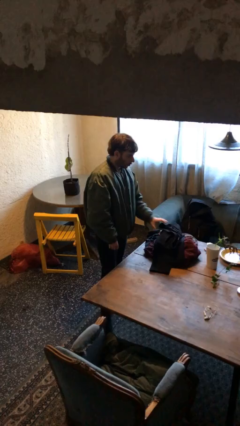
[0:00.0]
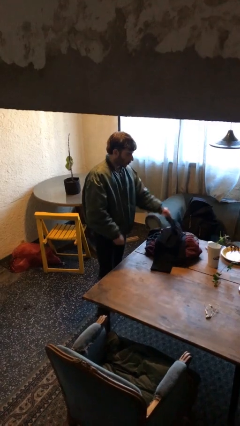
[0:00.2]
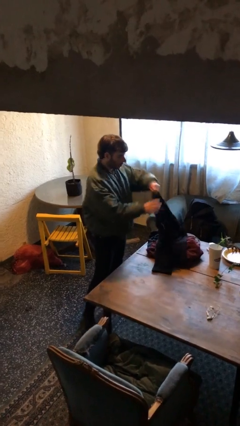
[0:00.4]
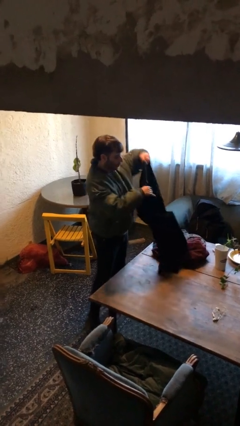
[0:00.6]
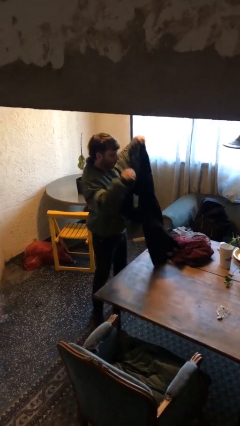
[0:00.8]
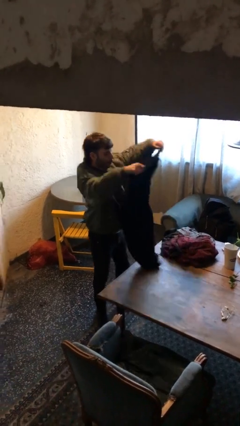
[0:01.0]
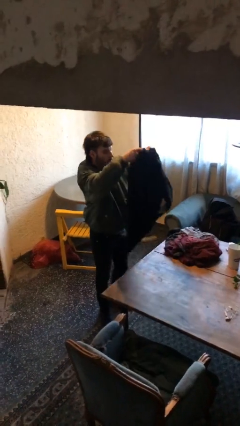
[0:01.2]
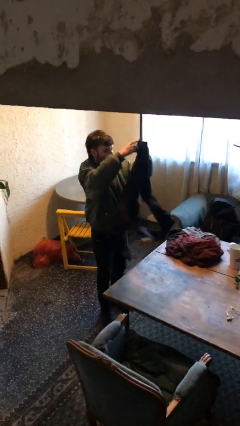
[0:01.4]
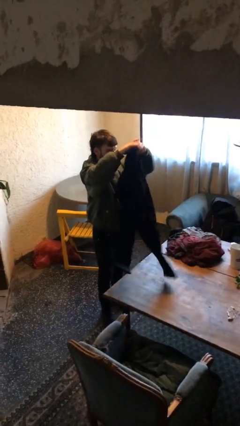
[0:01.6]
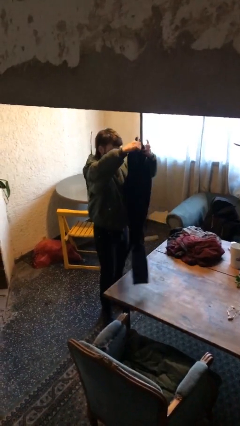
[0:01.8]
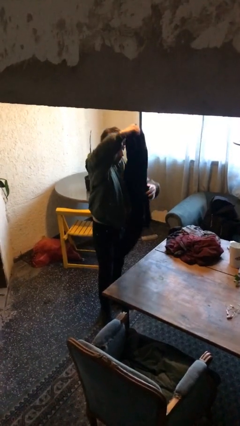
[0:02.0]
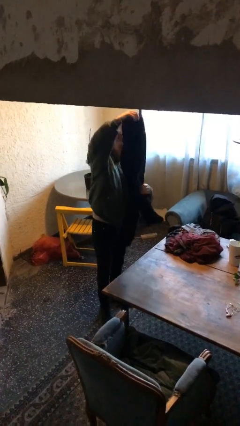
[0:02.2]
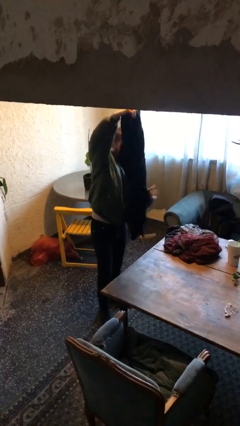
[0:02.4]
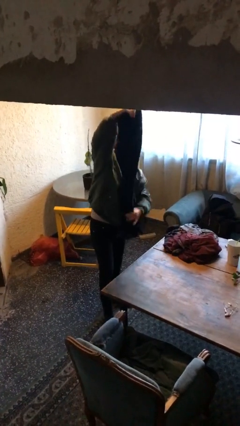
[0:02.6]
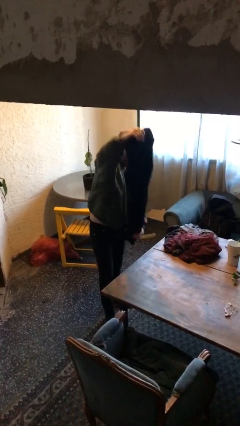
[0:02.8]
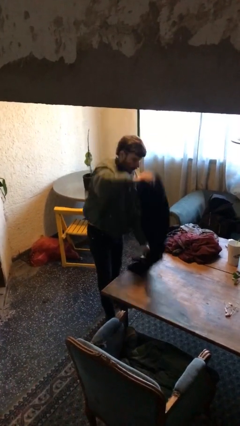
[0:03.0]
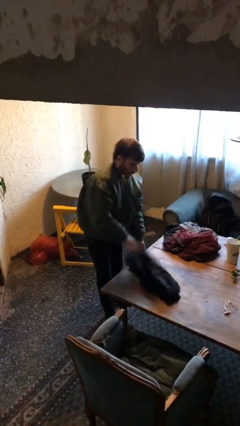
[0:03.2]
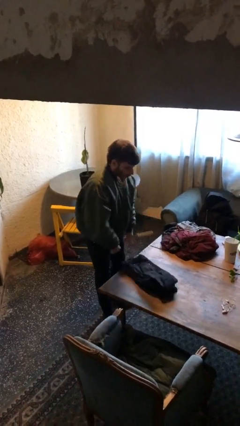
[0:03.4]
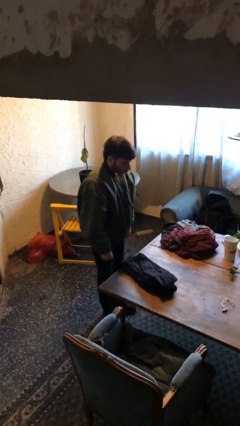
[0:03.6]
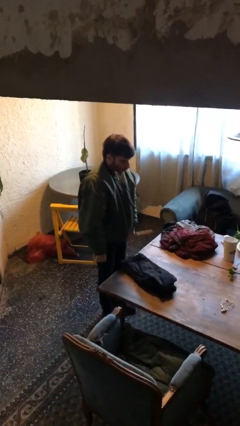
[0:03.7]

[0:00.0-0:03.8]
person folds pants

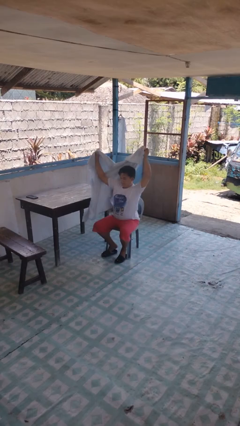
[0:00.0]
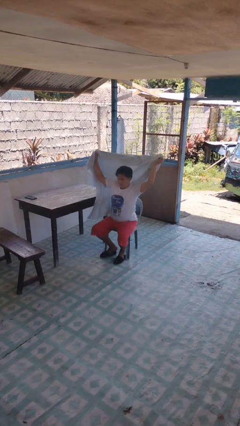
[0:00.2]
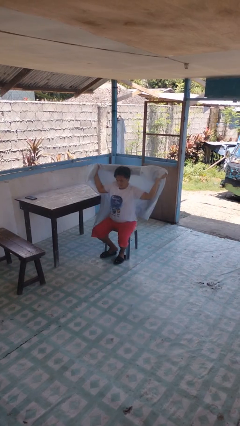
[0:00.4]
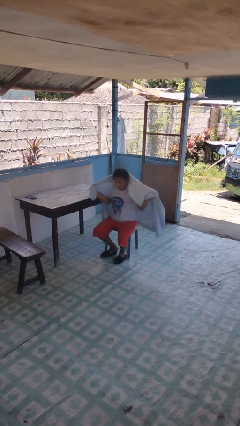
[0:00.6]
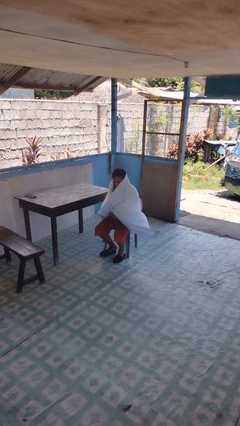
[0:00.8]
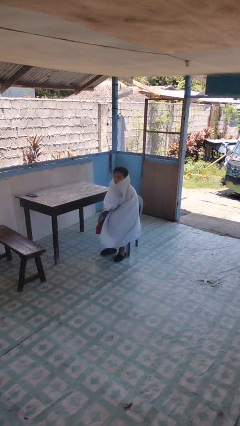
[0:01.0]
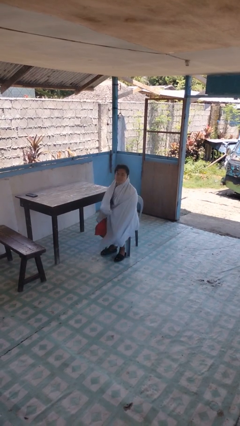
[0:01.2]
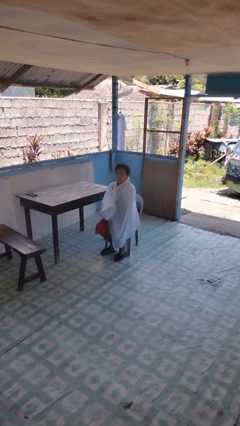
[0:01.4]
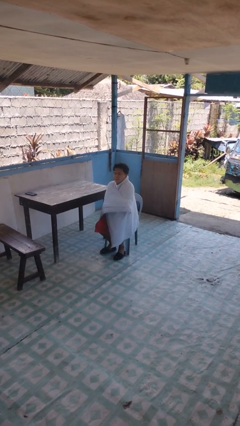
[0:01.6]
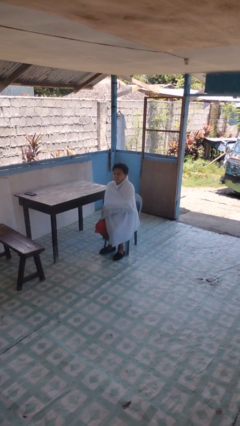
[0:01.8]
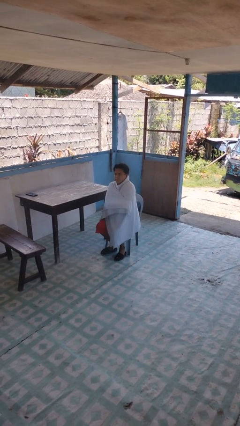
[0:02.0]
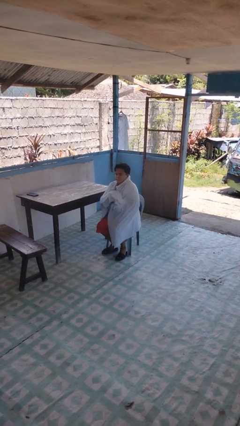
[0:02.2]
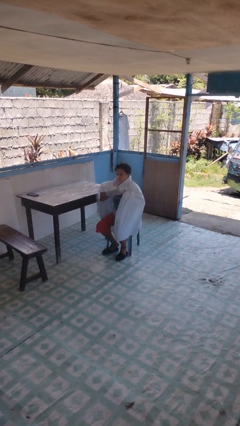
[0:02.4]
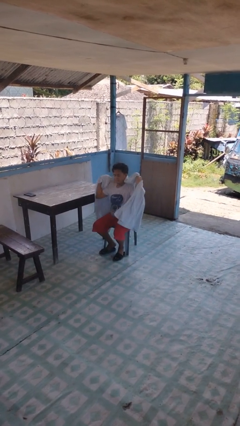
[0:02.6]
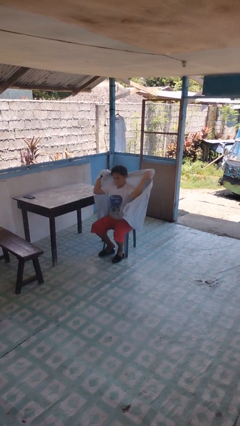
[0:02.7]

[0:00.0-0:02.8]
person covers with blanket

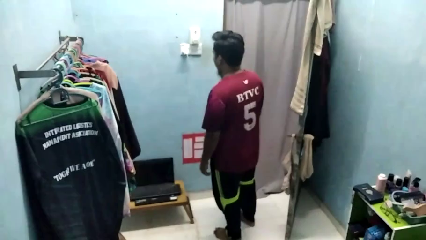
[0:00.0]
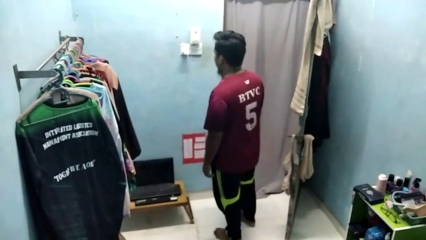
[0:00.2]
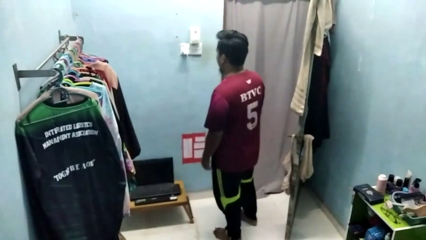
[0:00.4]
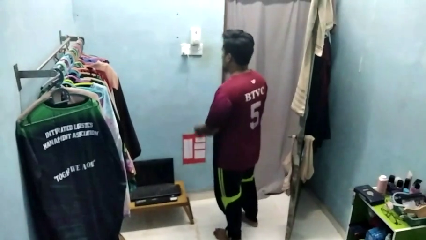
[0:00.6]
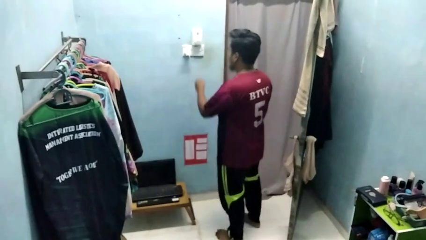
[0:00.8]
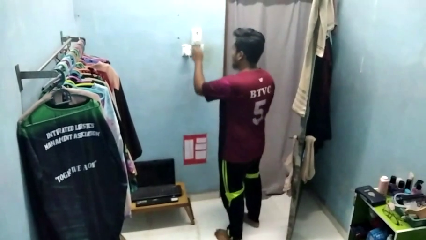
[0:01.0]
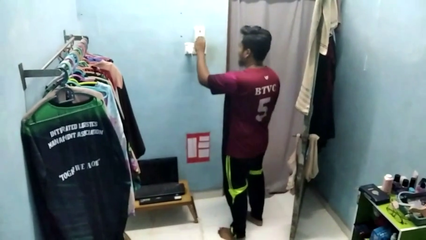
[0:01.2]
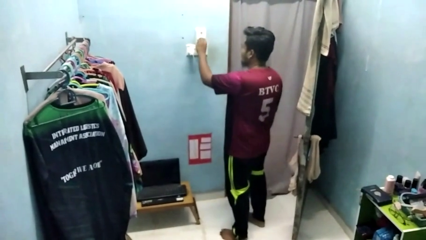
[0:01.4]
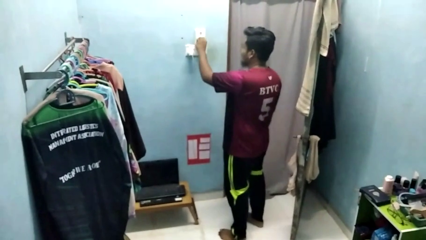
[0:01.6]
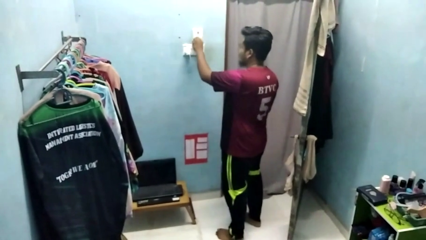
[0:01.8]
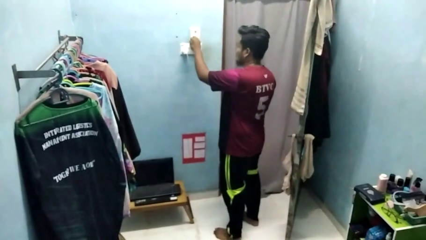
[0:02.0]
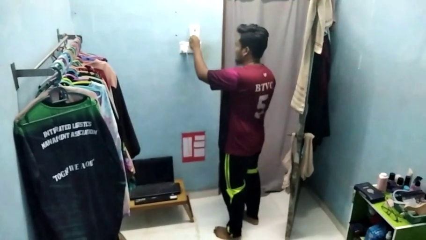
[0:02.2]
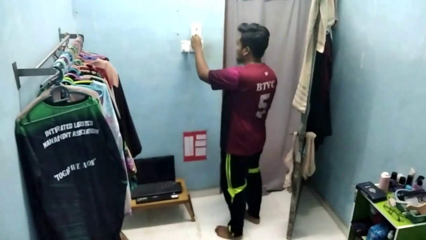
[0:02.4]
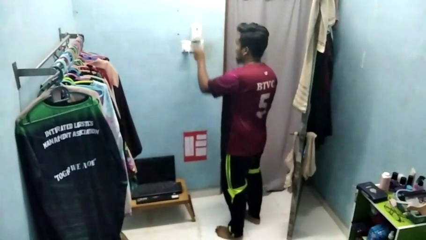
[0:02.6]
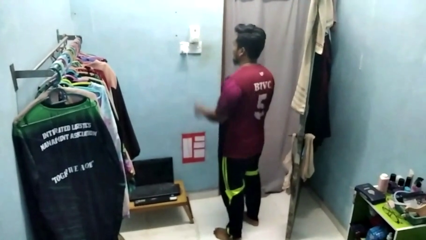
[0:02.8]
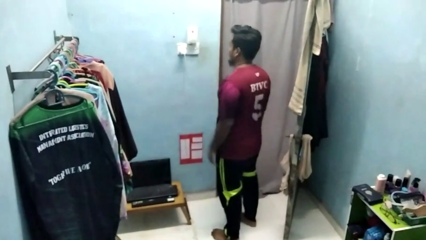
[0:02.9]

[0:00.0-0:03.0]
person adjusts thermostat

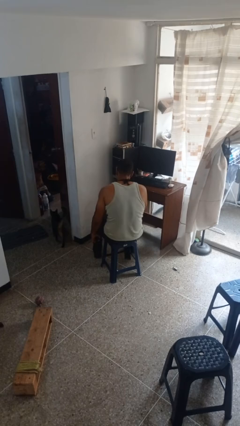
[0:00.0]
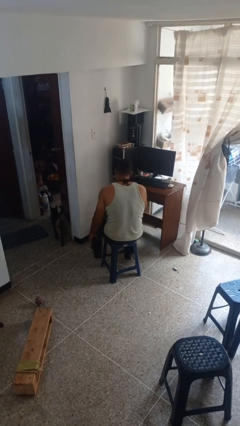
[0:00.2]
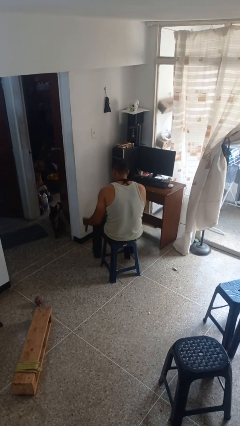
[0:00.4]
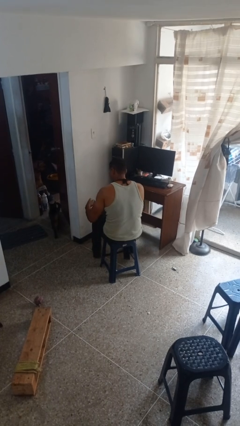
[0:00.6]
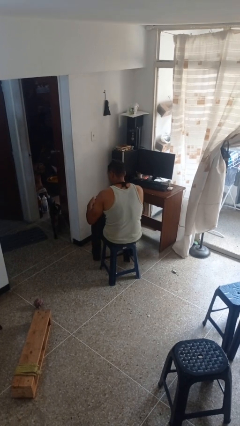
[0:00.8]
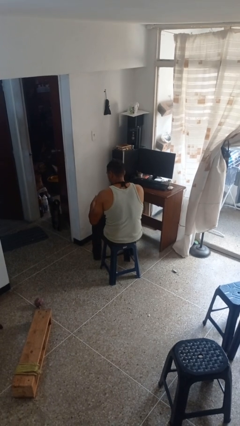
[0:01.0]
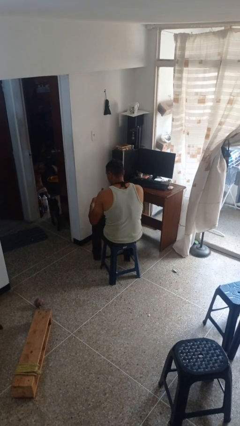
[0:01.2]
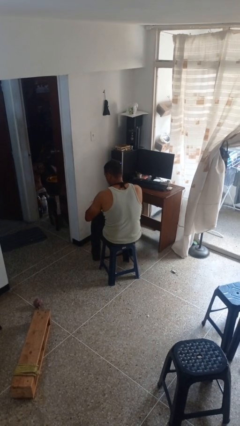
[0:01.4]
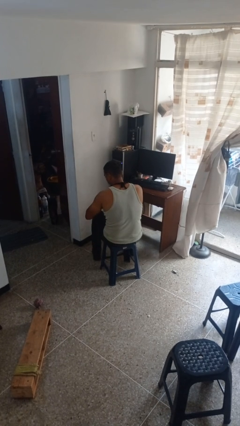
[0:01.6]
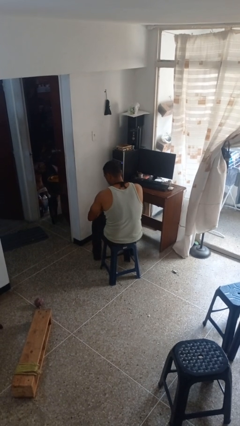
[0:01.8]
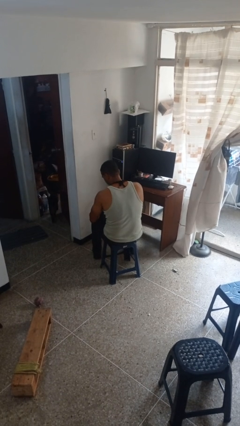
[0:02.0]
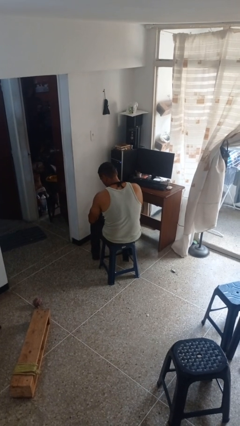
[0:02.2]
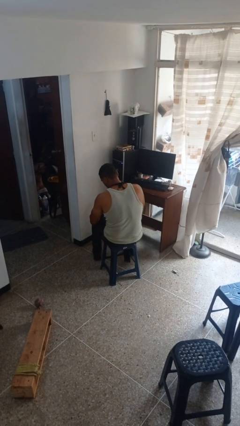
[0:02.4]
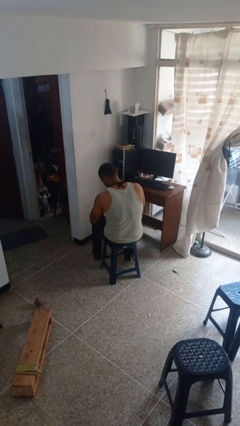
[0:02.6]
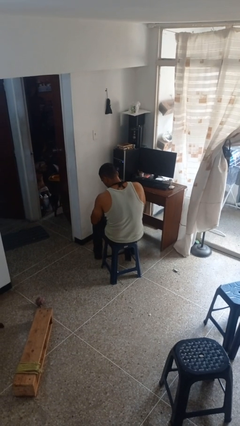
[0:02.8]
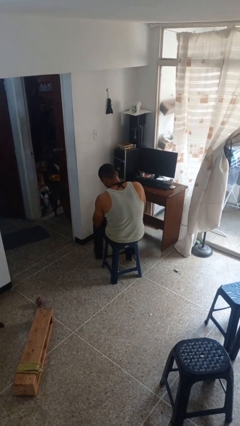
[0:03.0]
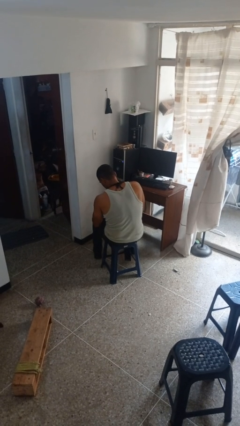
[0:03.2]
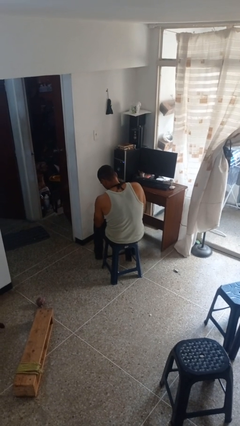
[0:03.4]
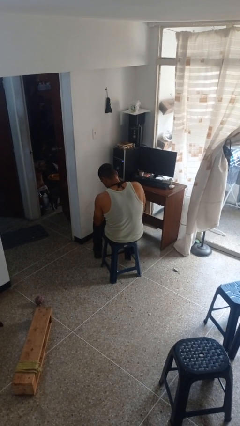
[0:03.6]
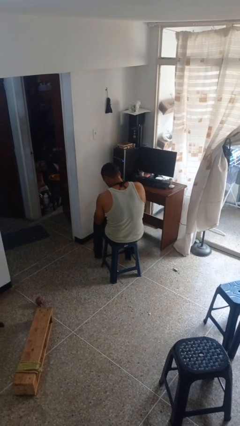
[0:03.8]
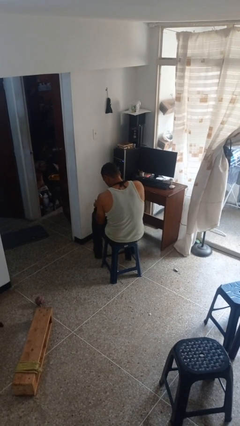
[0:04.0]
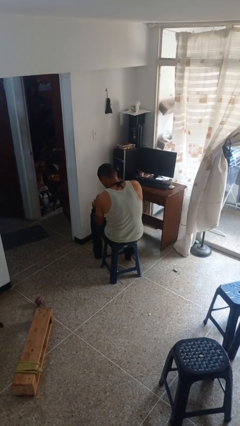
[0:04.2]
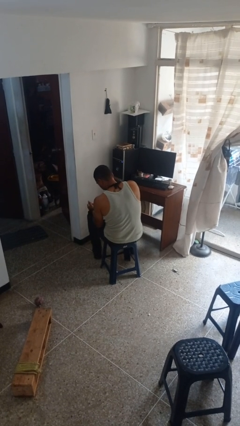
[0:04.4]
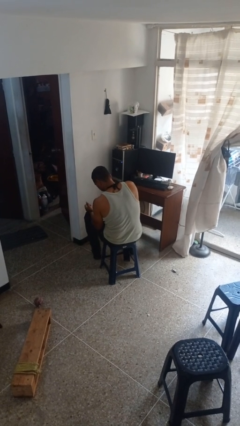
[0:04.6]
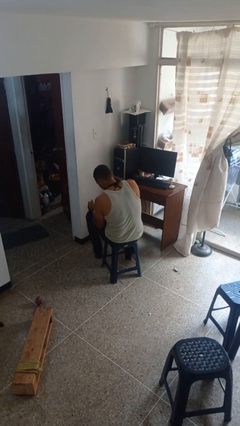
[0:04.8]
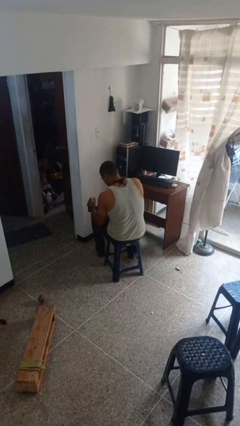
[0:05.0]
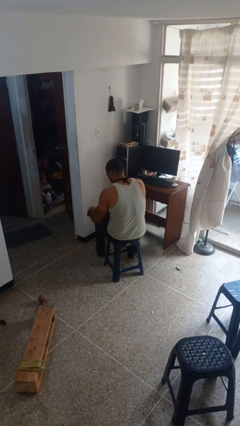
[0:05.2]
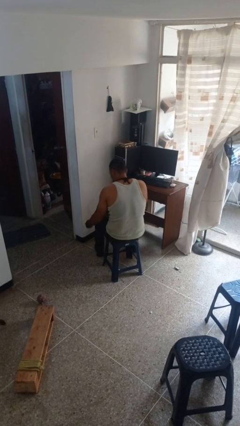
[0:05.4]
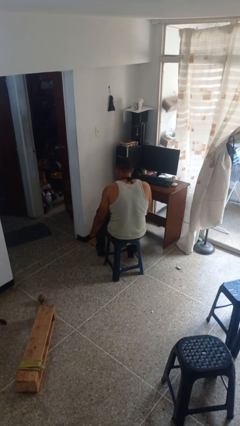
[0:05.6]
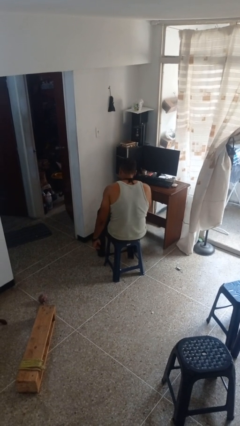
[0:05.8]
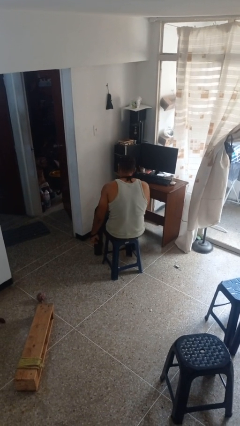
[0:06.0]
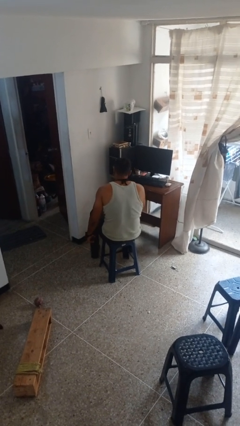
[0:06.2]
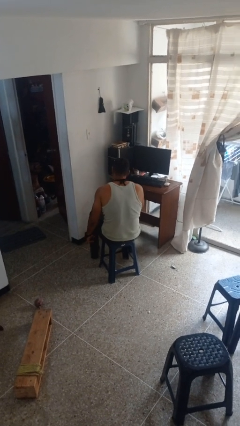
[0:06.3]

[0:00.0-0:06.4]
person puts on wristwatch

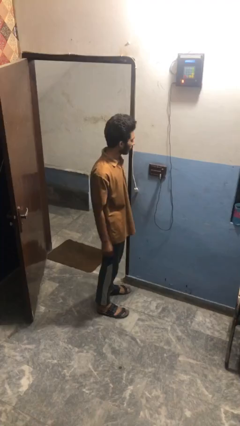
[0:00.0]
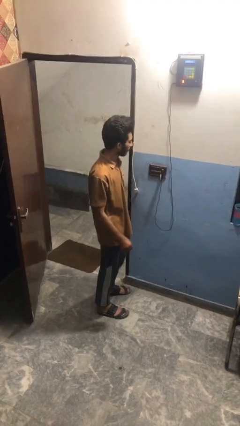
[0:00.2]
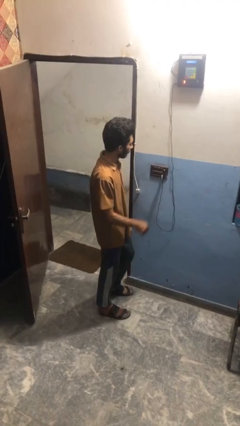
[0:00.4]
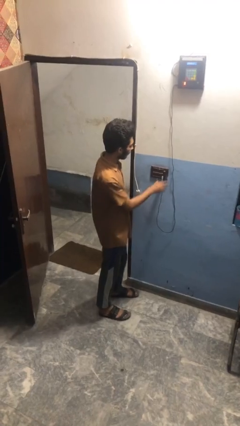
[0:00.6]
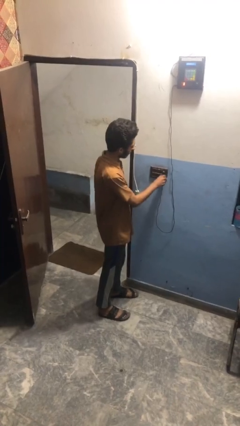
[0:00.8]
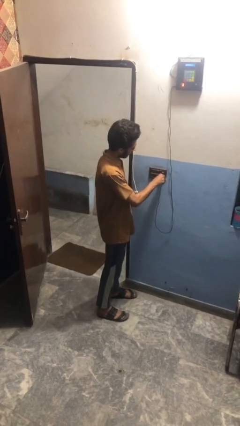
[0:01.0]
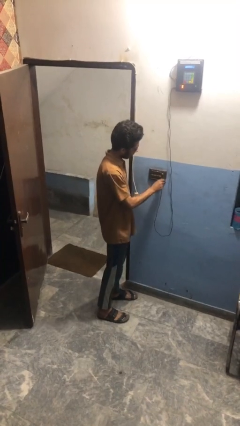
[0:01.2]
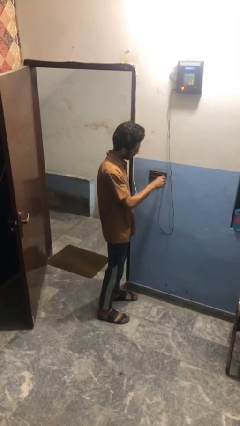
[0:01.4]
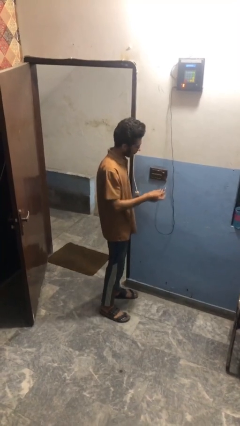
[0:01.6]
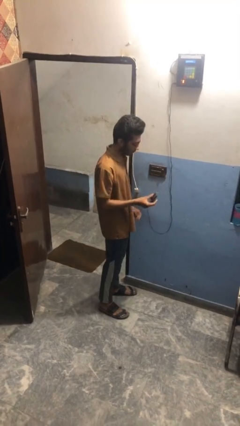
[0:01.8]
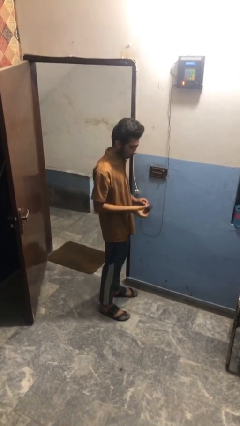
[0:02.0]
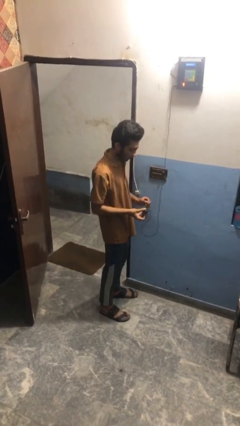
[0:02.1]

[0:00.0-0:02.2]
person unplugs from electrical socket
